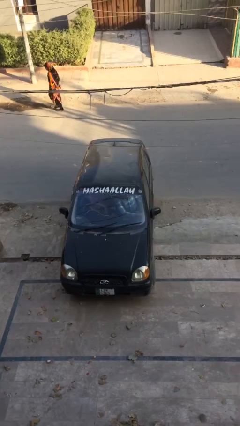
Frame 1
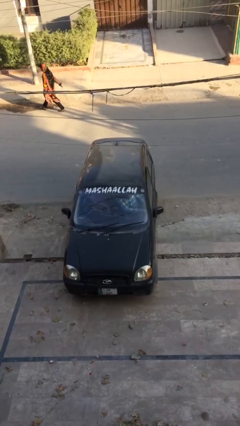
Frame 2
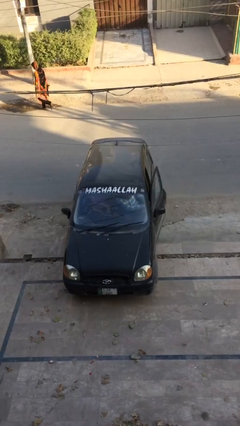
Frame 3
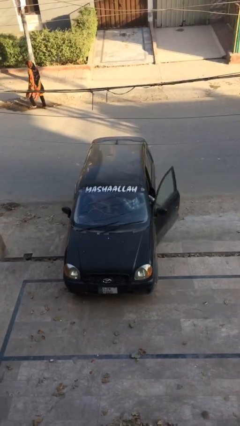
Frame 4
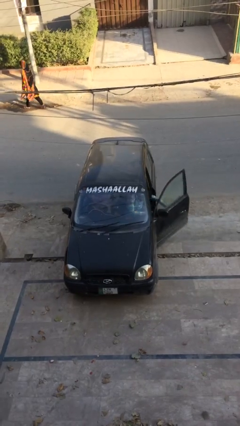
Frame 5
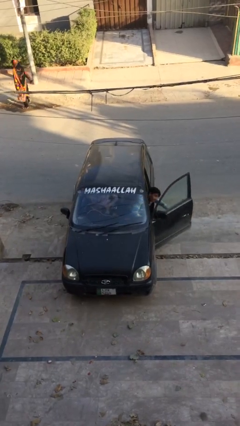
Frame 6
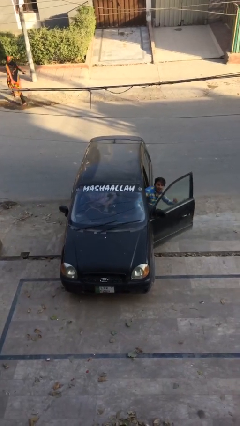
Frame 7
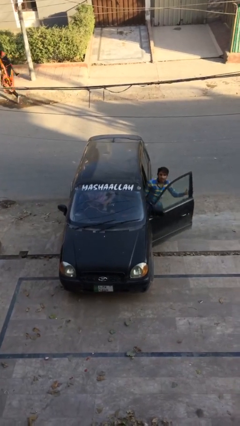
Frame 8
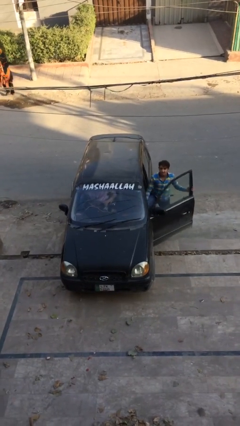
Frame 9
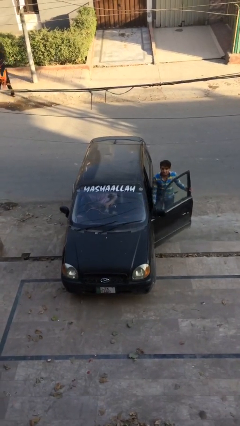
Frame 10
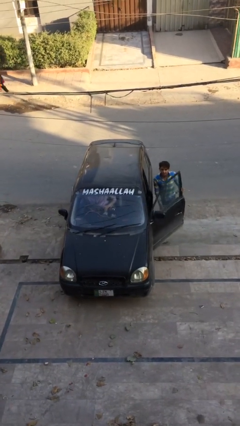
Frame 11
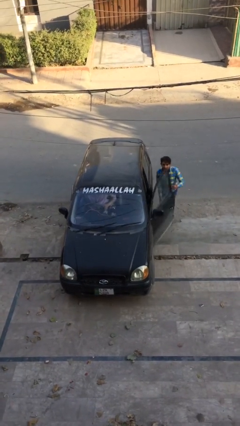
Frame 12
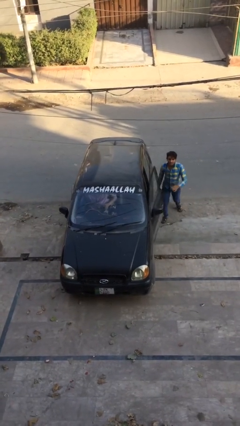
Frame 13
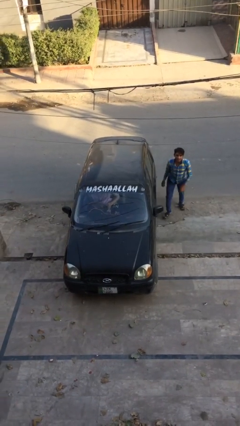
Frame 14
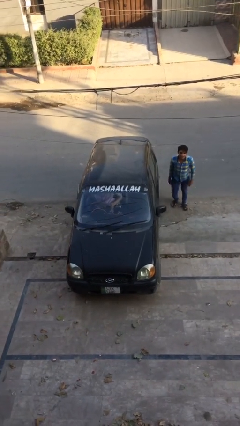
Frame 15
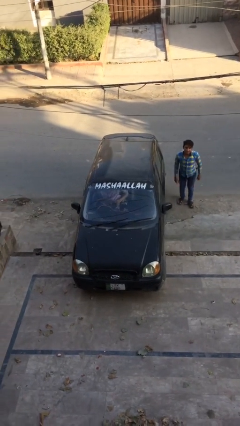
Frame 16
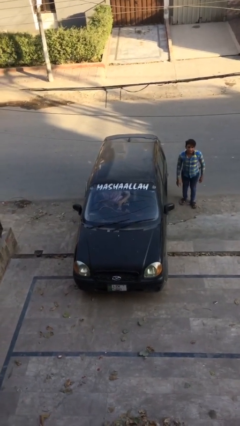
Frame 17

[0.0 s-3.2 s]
car drops off person

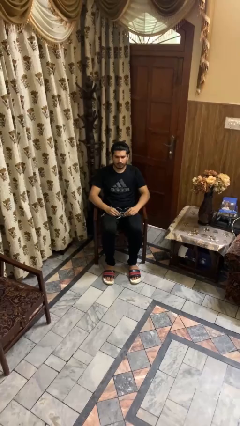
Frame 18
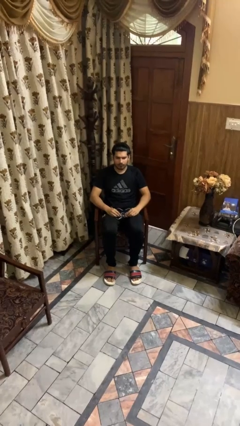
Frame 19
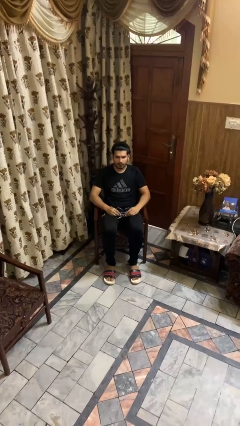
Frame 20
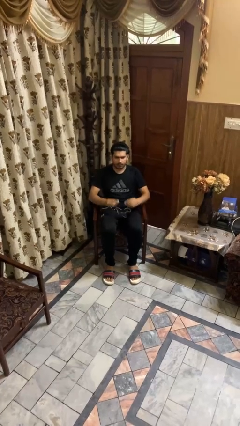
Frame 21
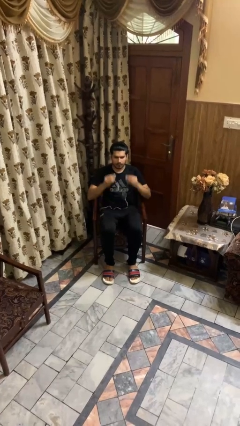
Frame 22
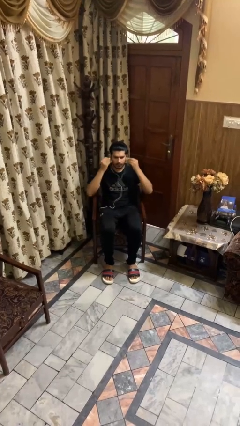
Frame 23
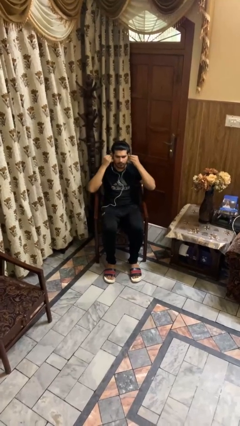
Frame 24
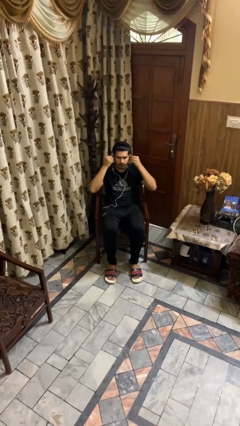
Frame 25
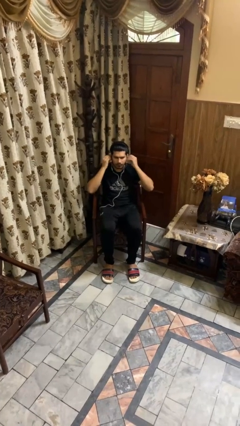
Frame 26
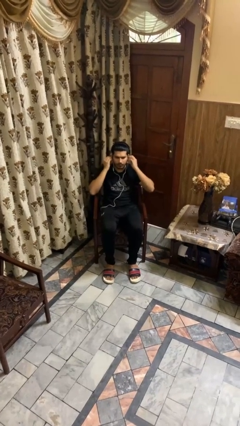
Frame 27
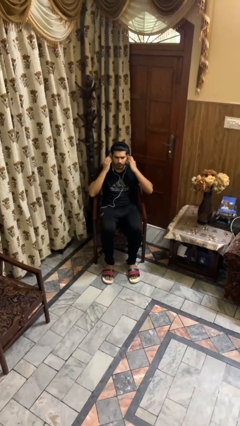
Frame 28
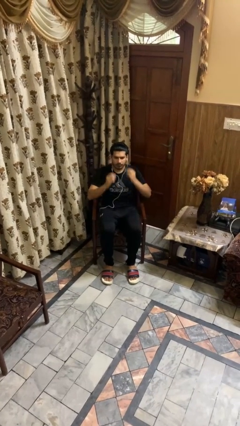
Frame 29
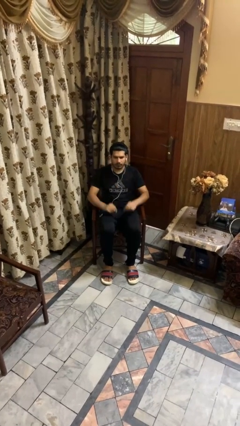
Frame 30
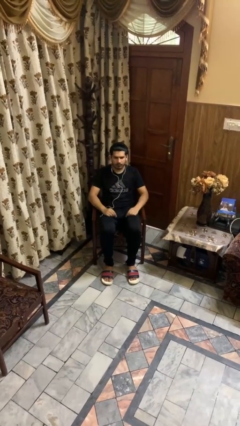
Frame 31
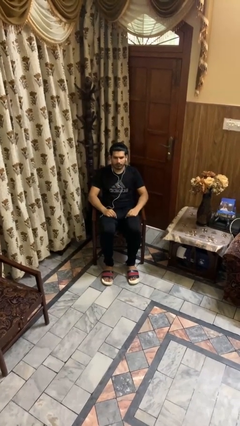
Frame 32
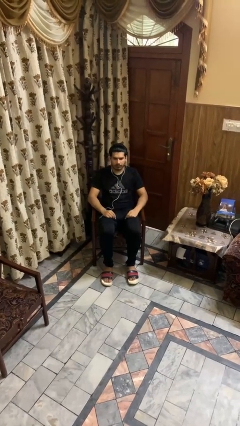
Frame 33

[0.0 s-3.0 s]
person puts on headphones

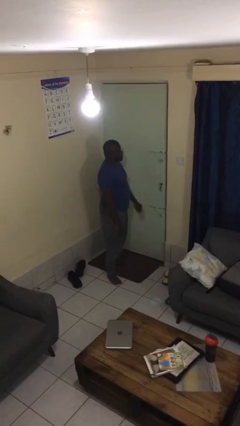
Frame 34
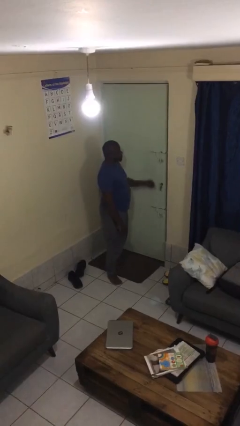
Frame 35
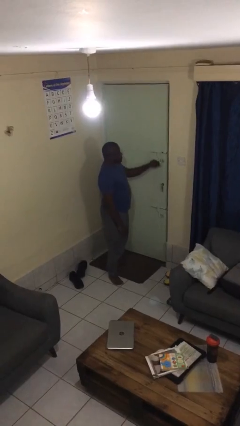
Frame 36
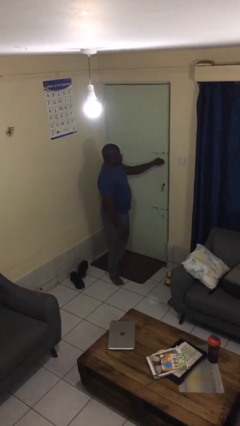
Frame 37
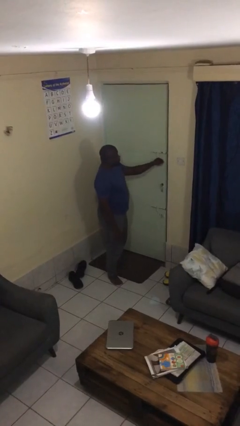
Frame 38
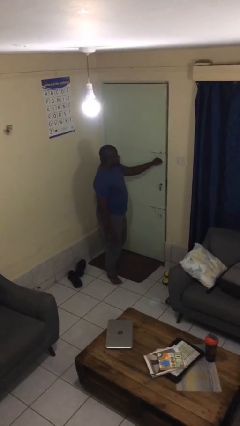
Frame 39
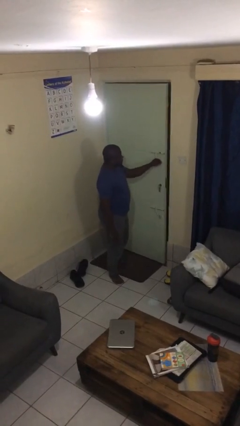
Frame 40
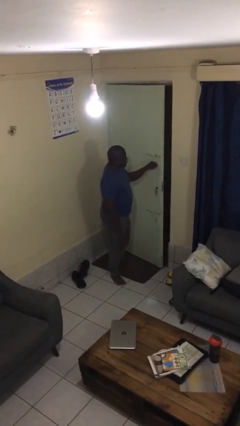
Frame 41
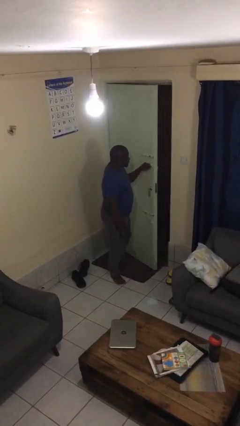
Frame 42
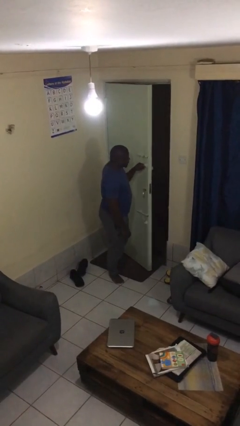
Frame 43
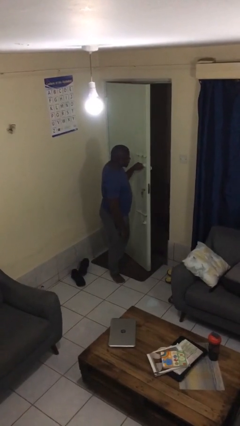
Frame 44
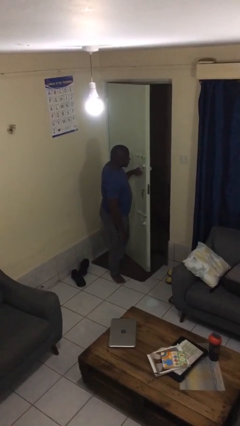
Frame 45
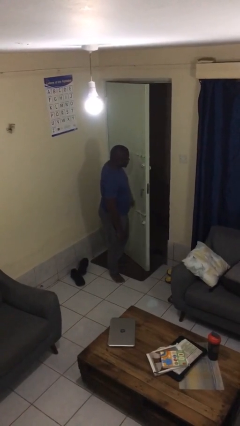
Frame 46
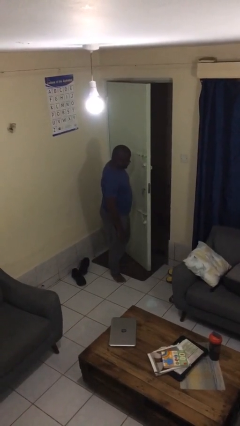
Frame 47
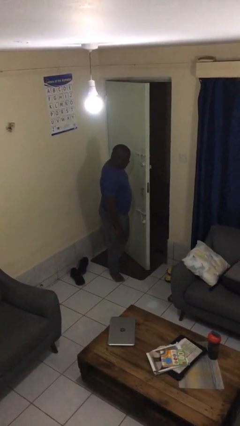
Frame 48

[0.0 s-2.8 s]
person opens facility door

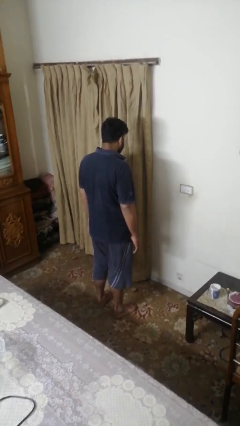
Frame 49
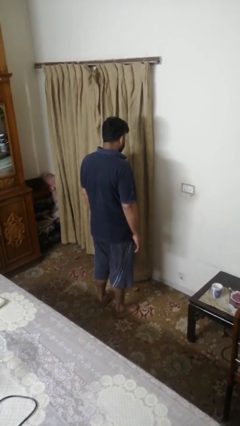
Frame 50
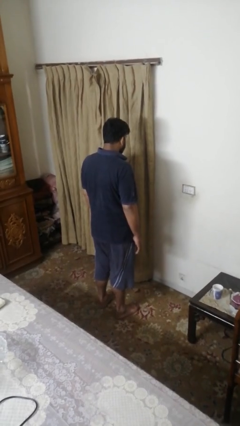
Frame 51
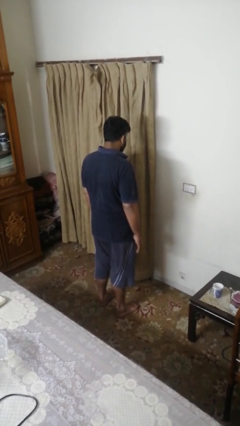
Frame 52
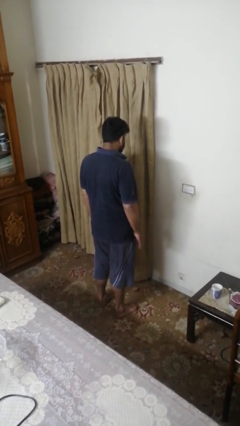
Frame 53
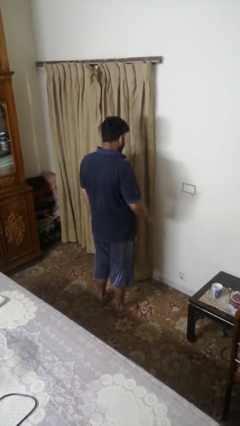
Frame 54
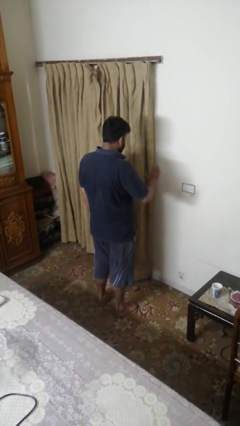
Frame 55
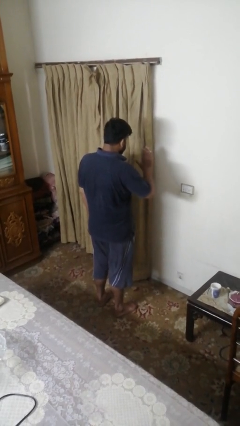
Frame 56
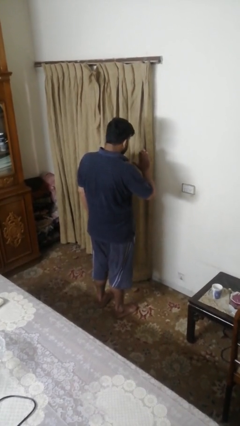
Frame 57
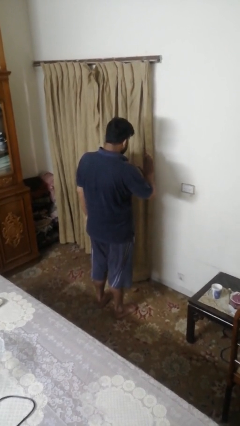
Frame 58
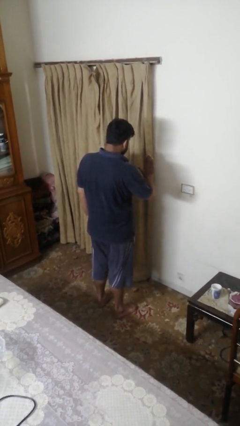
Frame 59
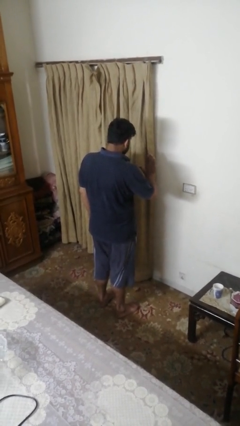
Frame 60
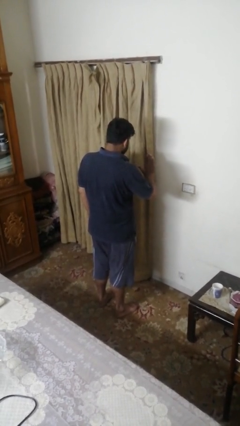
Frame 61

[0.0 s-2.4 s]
person gestures stop

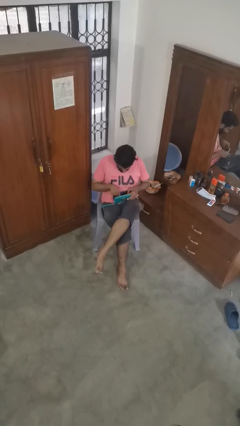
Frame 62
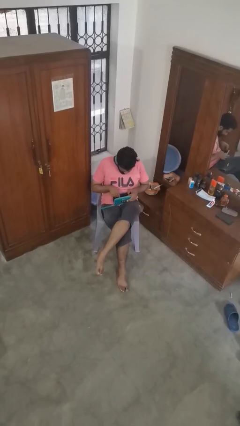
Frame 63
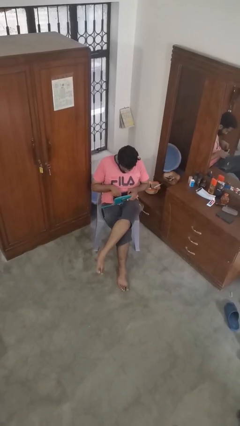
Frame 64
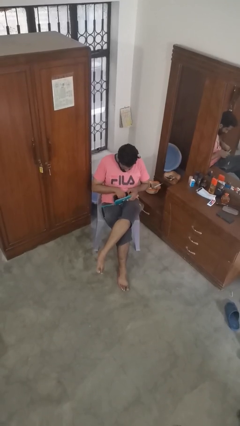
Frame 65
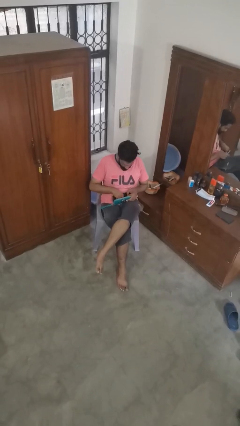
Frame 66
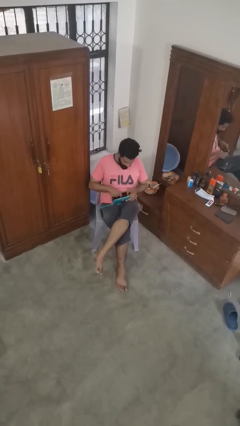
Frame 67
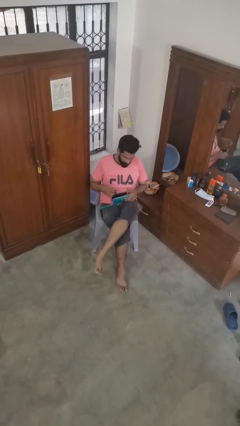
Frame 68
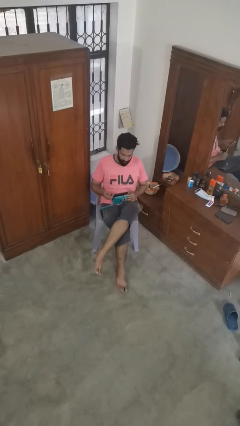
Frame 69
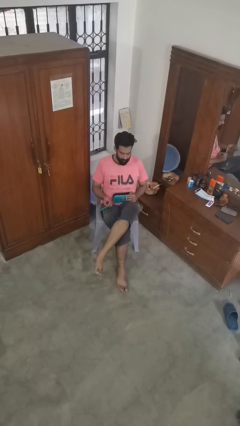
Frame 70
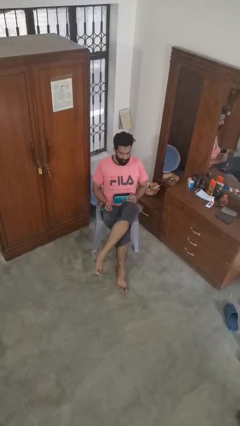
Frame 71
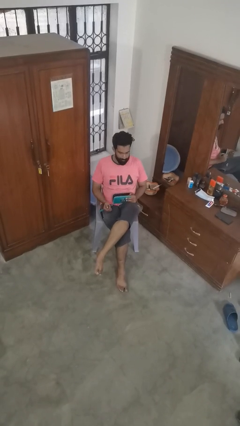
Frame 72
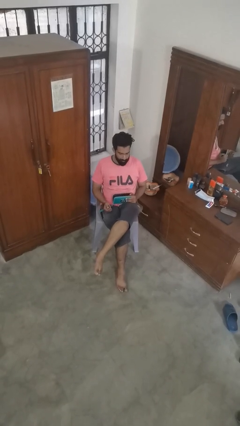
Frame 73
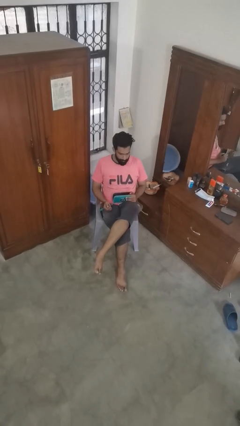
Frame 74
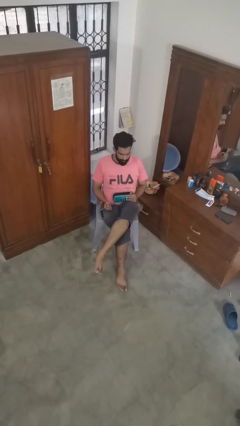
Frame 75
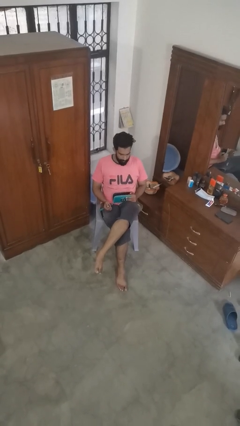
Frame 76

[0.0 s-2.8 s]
person takes object from purse

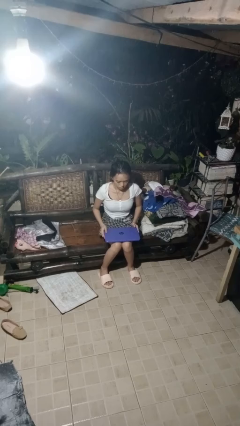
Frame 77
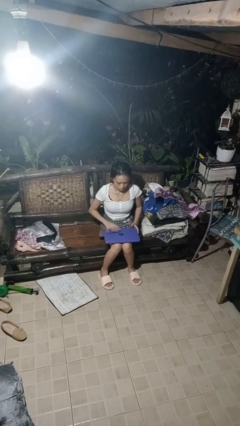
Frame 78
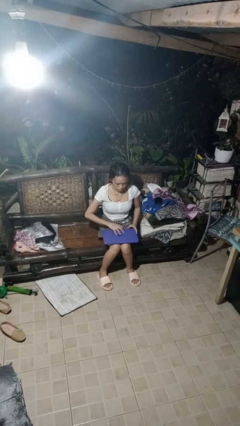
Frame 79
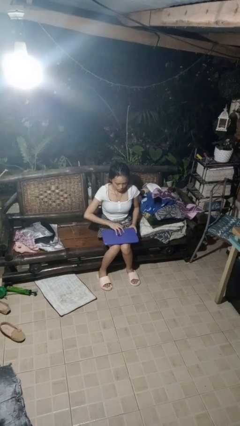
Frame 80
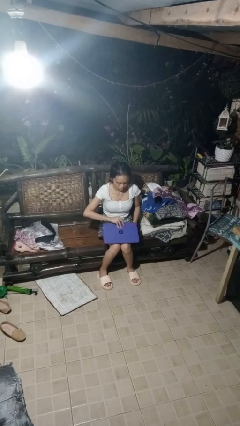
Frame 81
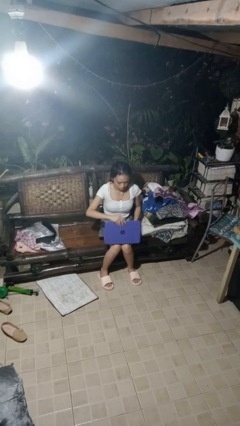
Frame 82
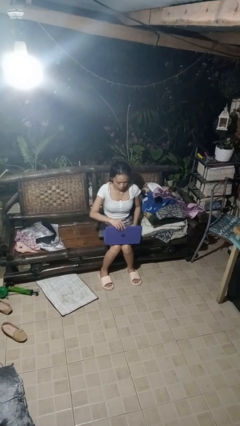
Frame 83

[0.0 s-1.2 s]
person opens laptop

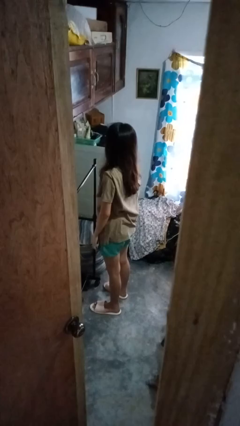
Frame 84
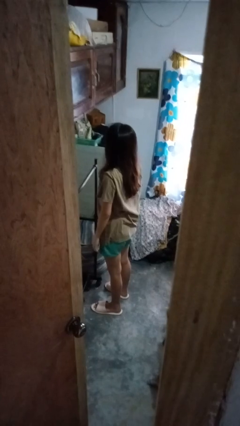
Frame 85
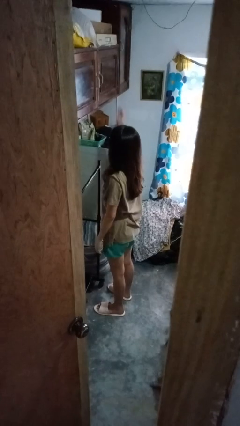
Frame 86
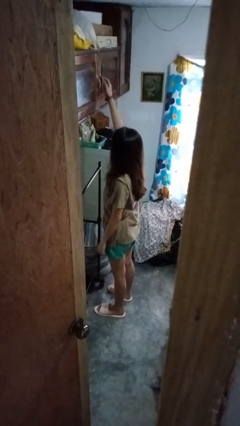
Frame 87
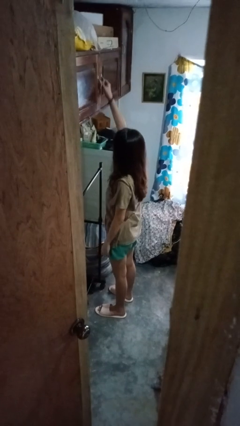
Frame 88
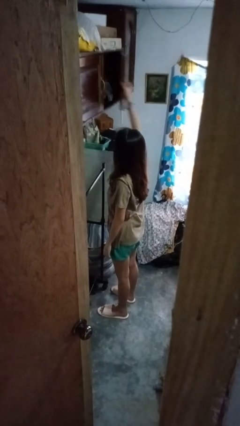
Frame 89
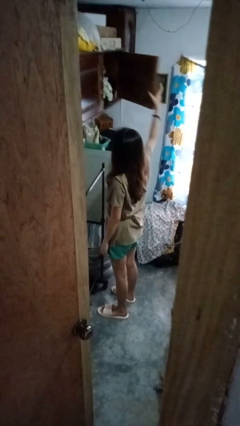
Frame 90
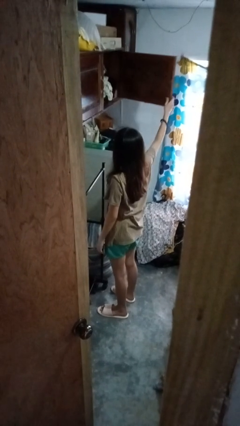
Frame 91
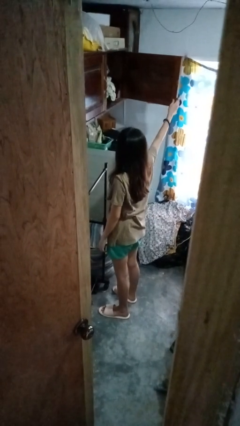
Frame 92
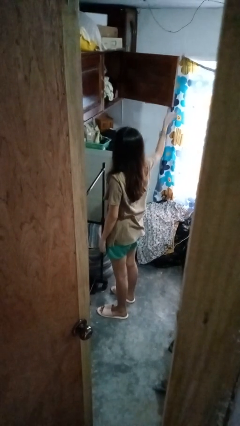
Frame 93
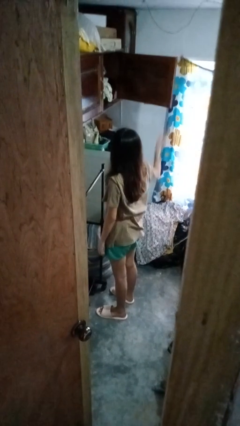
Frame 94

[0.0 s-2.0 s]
person opens closet door
